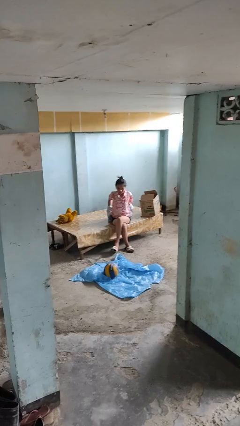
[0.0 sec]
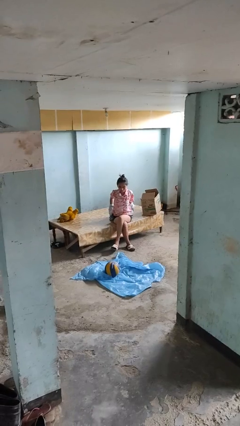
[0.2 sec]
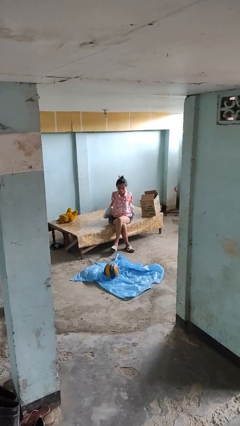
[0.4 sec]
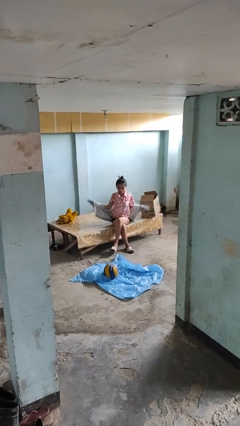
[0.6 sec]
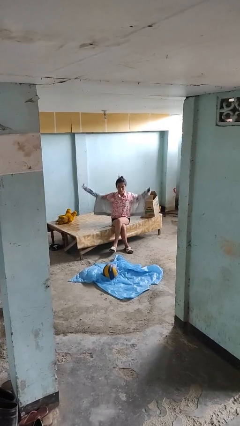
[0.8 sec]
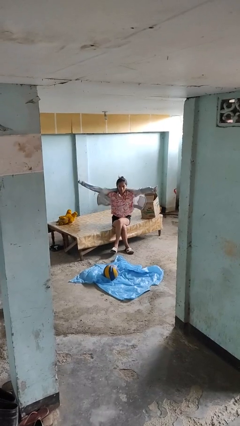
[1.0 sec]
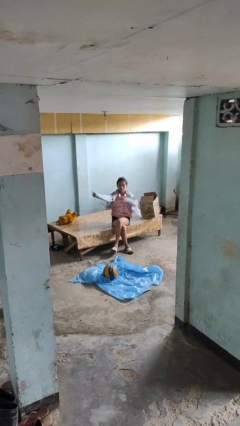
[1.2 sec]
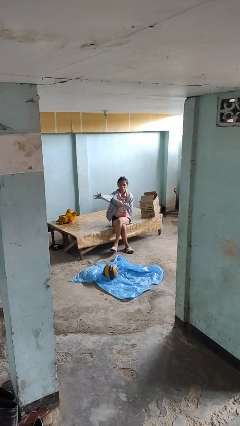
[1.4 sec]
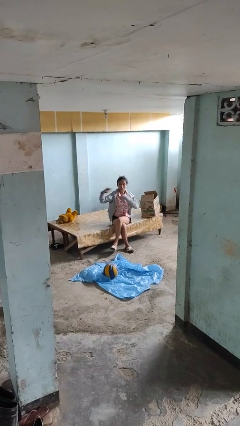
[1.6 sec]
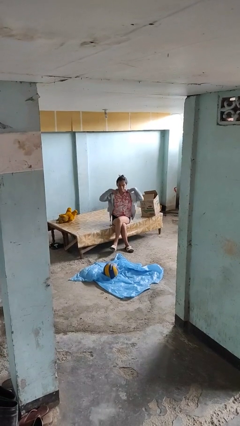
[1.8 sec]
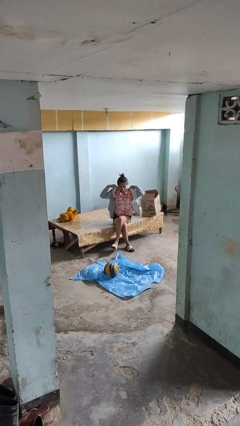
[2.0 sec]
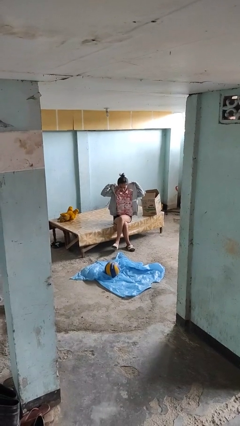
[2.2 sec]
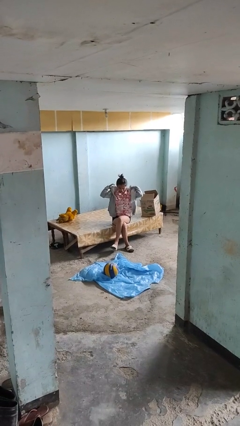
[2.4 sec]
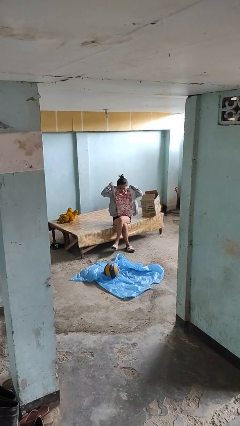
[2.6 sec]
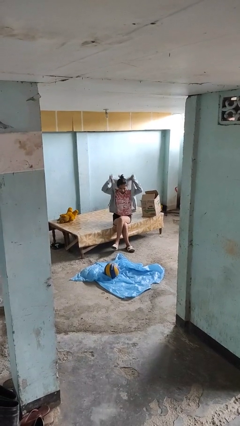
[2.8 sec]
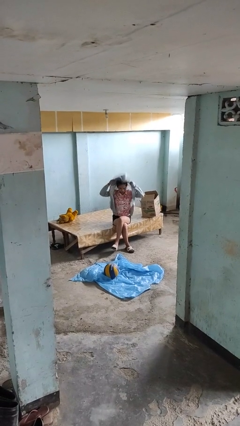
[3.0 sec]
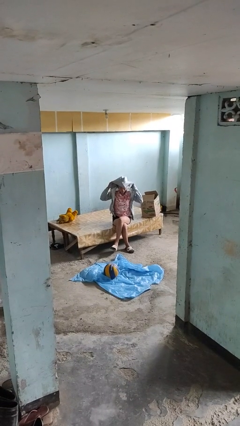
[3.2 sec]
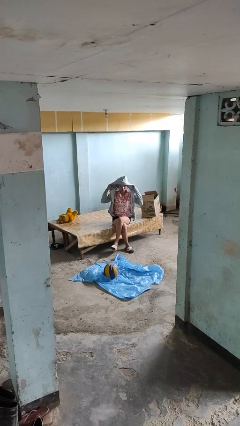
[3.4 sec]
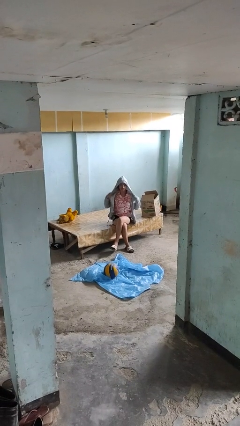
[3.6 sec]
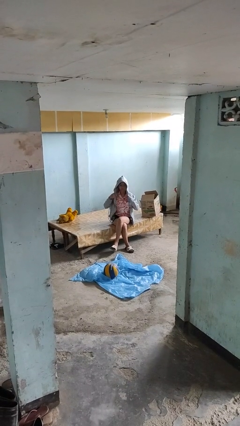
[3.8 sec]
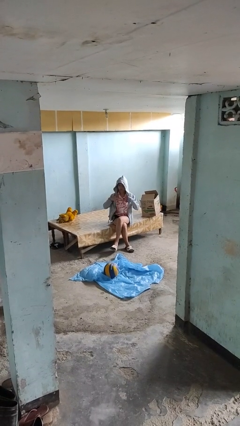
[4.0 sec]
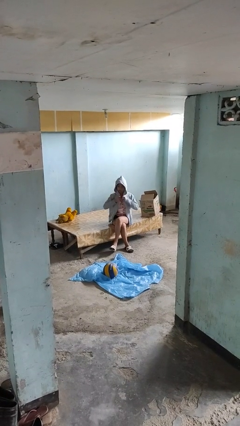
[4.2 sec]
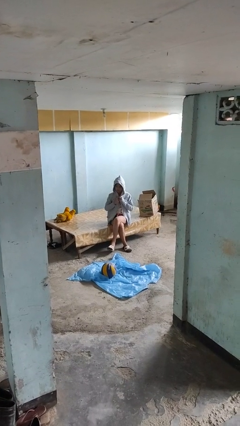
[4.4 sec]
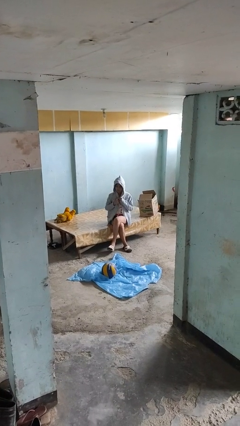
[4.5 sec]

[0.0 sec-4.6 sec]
person puts on hoodie

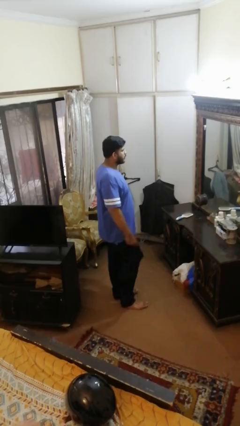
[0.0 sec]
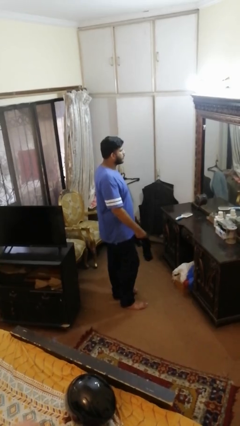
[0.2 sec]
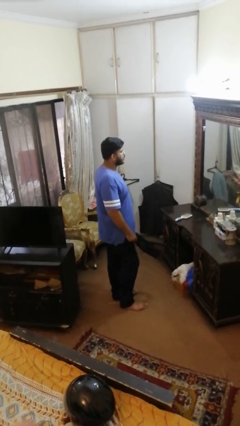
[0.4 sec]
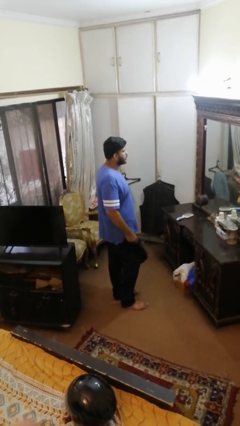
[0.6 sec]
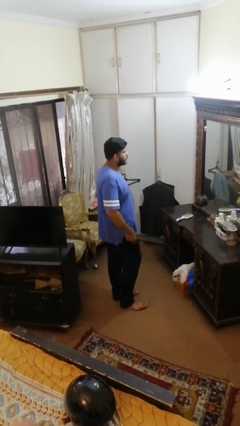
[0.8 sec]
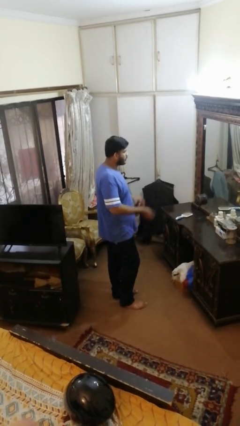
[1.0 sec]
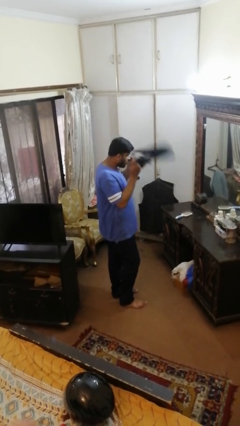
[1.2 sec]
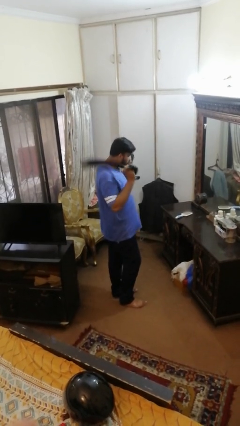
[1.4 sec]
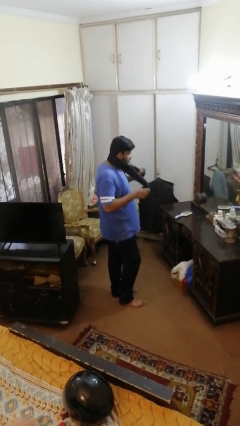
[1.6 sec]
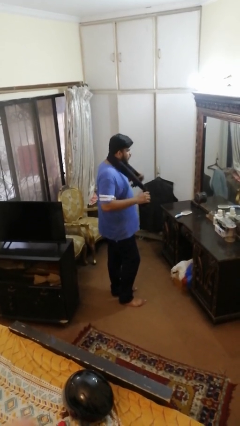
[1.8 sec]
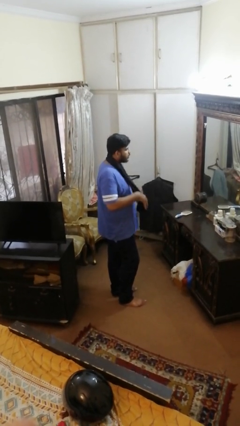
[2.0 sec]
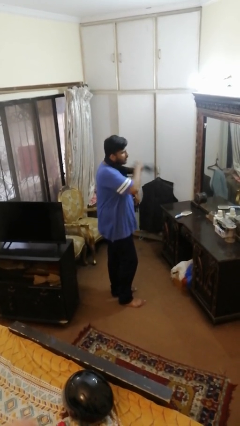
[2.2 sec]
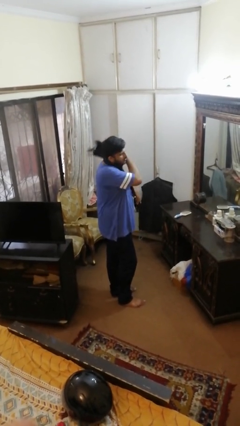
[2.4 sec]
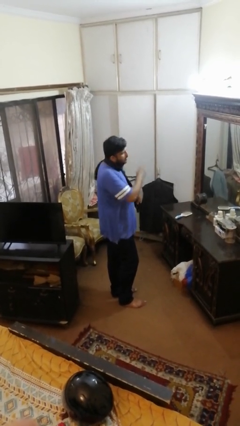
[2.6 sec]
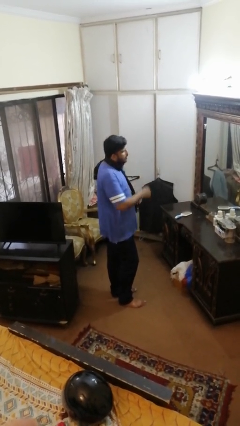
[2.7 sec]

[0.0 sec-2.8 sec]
person puts on scarf

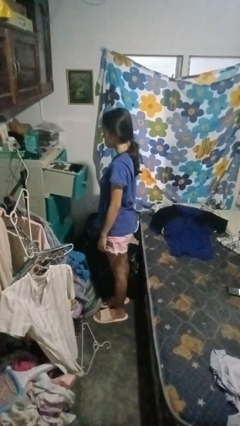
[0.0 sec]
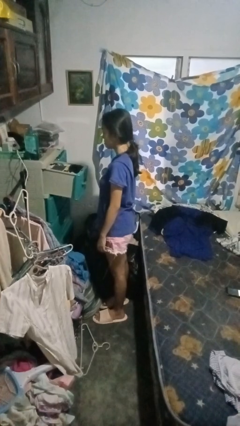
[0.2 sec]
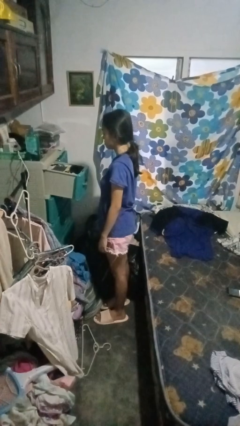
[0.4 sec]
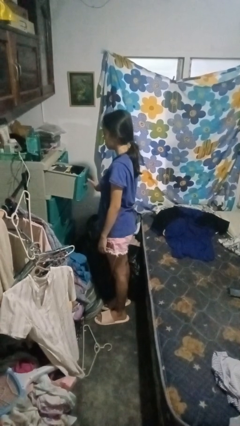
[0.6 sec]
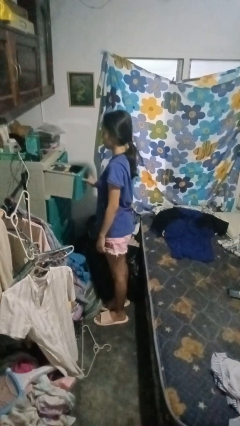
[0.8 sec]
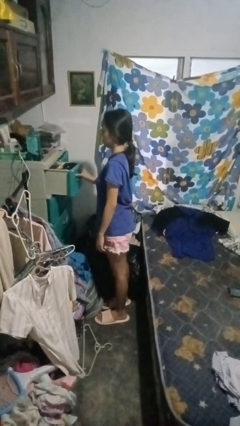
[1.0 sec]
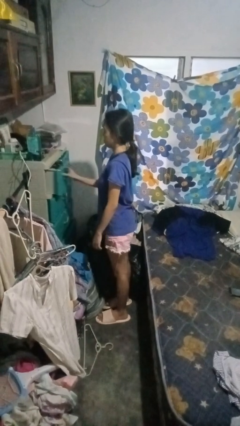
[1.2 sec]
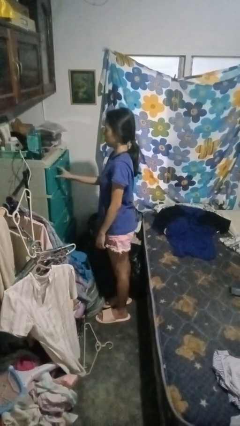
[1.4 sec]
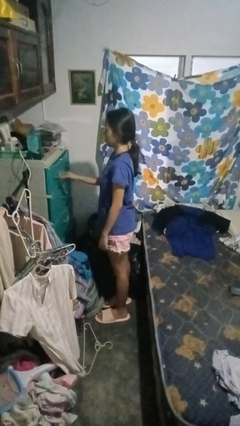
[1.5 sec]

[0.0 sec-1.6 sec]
person closes dresser drawer

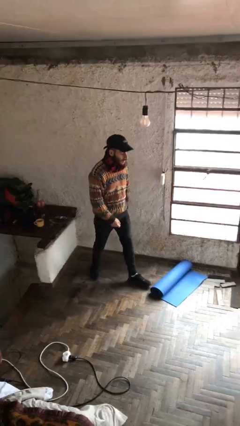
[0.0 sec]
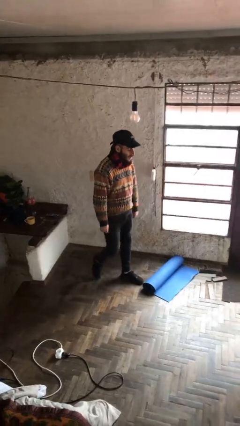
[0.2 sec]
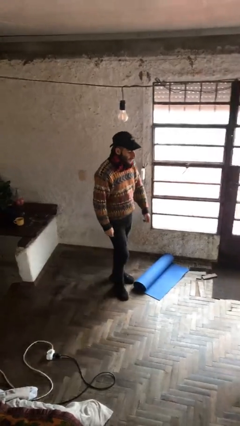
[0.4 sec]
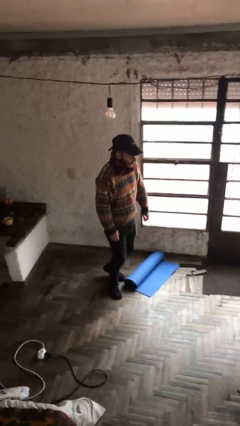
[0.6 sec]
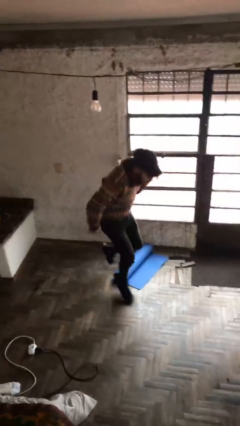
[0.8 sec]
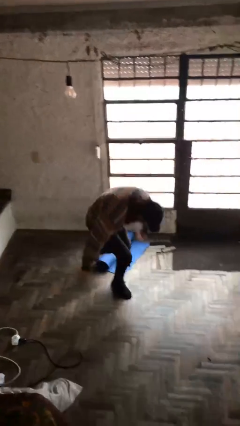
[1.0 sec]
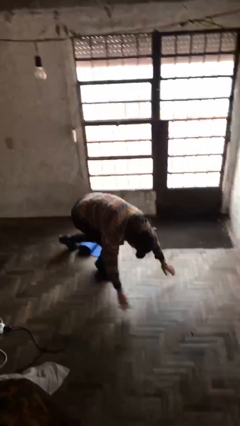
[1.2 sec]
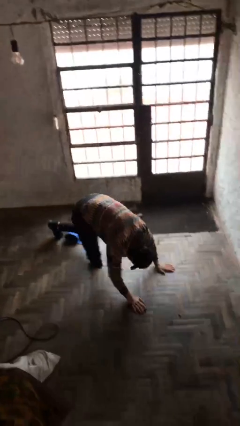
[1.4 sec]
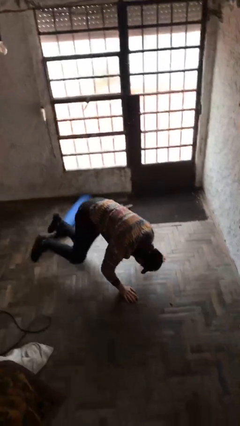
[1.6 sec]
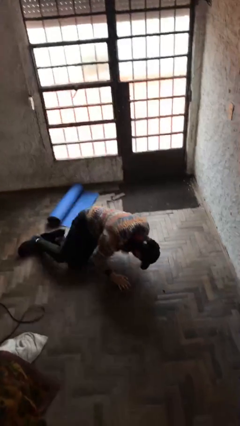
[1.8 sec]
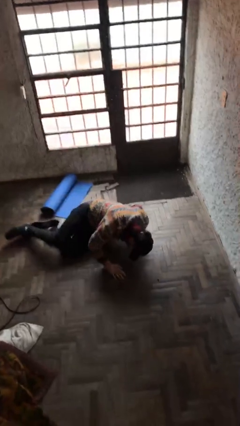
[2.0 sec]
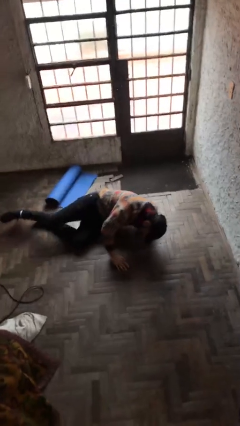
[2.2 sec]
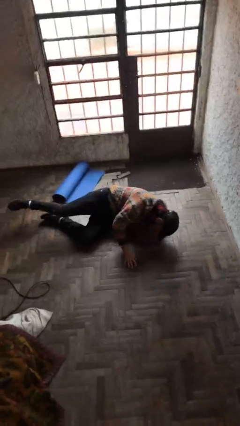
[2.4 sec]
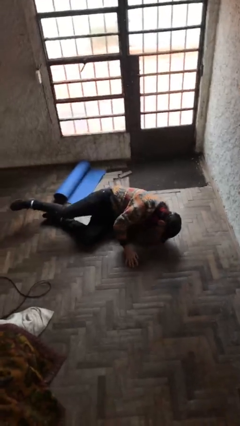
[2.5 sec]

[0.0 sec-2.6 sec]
person trips on object on floor

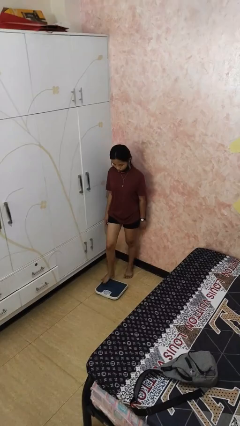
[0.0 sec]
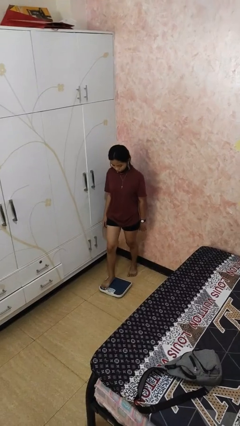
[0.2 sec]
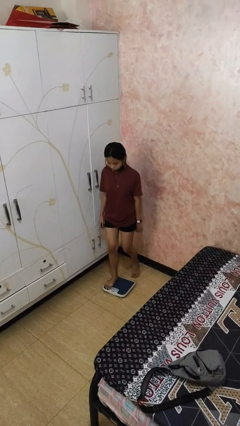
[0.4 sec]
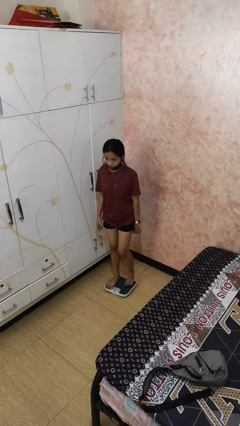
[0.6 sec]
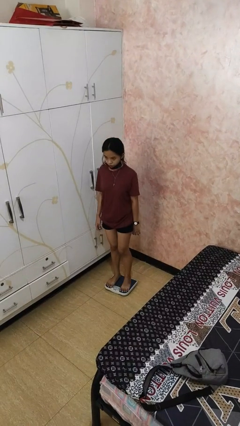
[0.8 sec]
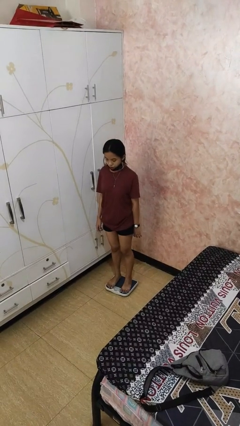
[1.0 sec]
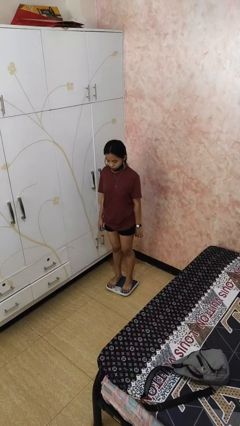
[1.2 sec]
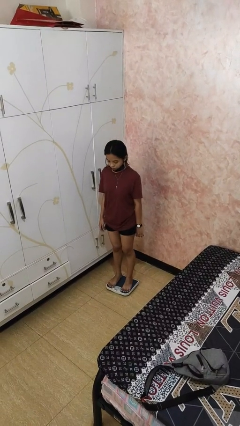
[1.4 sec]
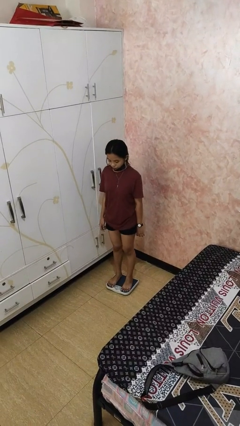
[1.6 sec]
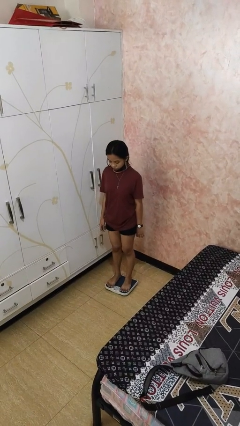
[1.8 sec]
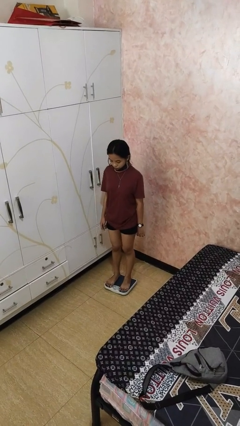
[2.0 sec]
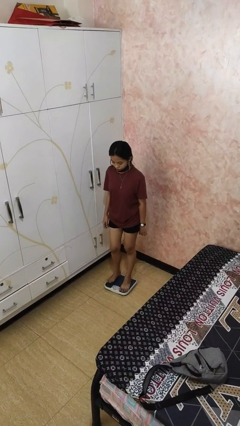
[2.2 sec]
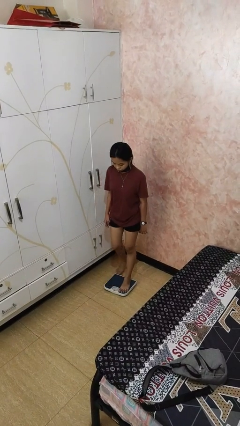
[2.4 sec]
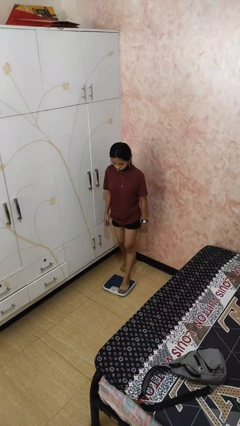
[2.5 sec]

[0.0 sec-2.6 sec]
person uses bodyweight scale

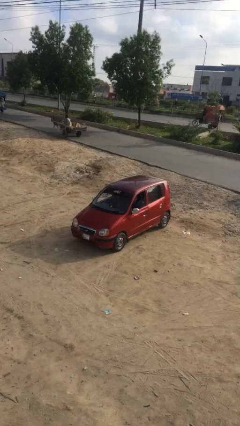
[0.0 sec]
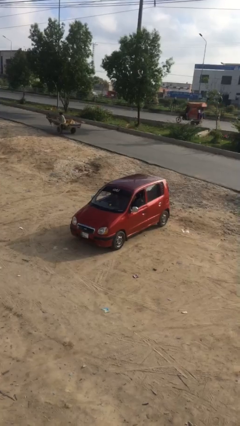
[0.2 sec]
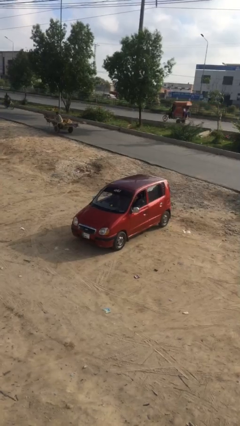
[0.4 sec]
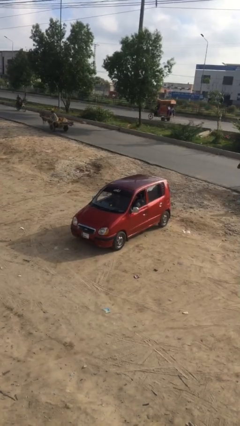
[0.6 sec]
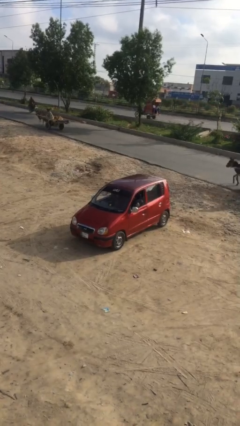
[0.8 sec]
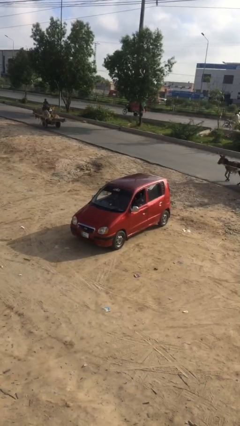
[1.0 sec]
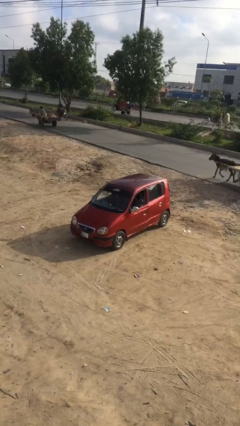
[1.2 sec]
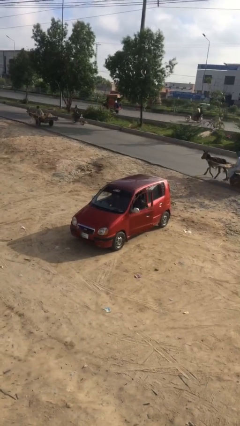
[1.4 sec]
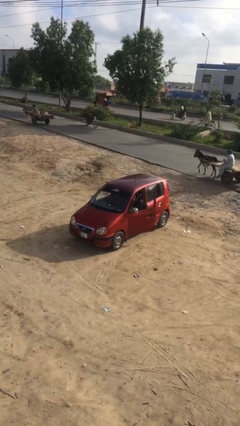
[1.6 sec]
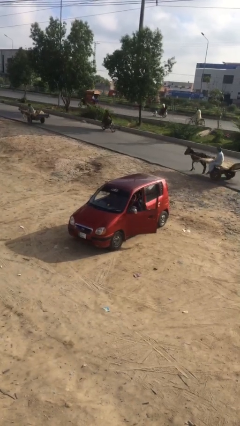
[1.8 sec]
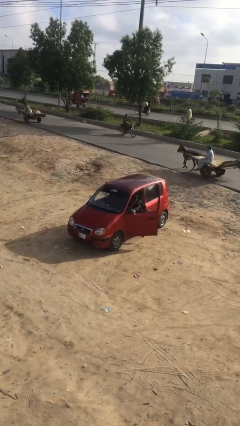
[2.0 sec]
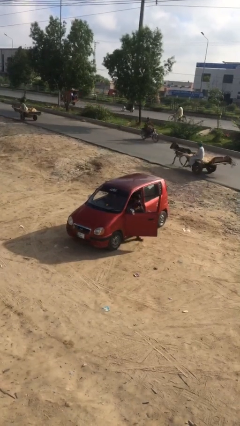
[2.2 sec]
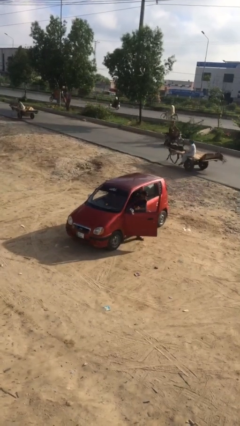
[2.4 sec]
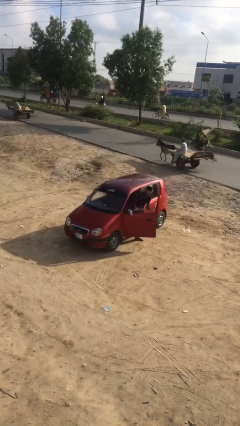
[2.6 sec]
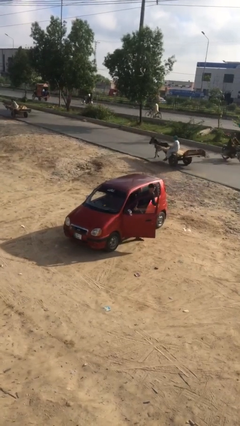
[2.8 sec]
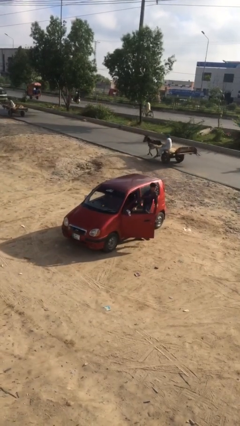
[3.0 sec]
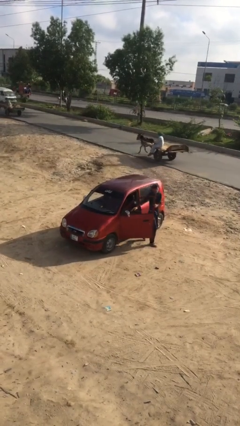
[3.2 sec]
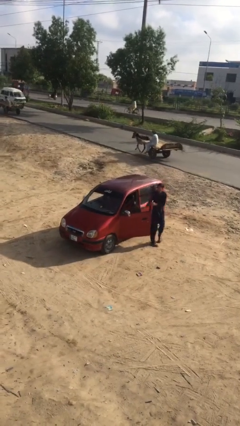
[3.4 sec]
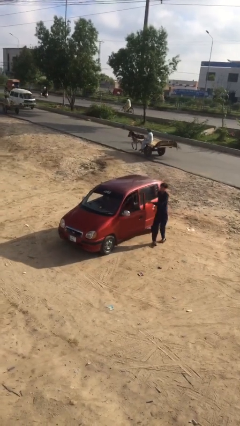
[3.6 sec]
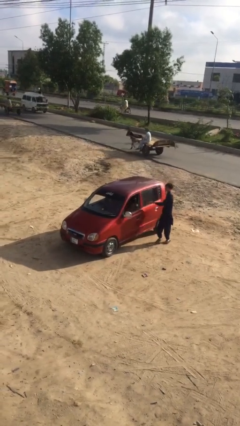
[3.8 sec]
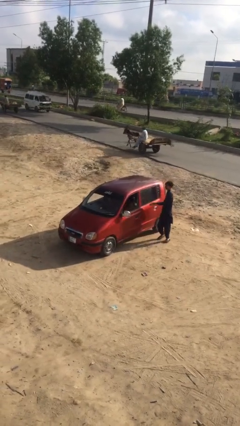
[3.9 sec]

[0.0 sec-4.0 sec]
car drops off person
